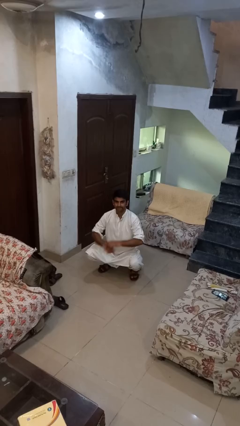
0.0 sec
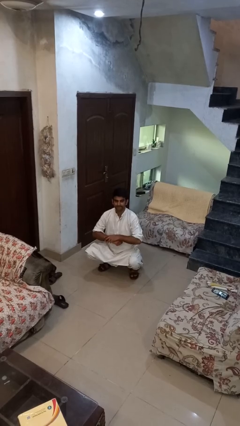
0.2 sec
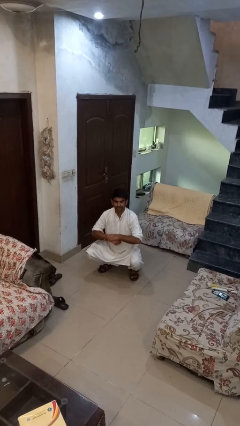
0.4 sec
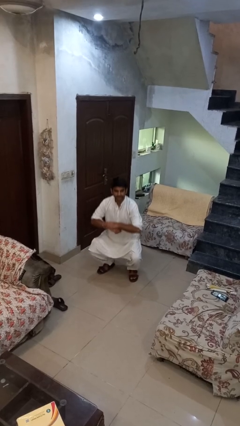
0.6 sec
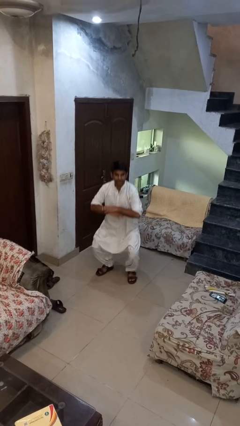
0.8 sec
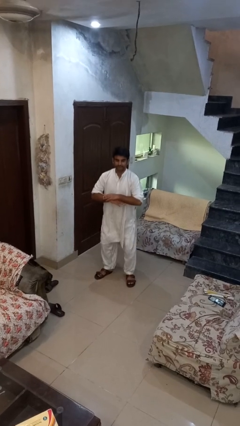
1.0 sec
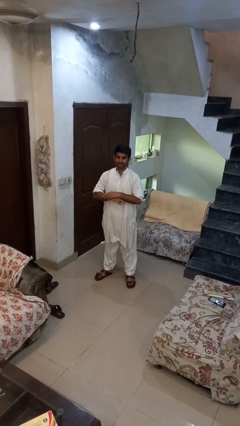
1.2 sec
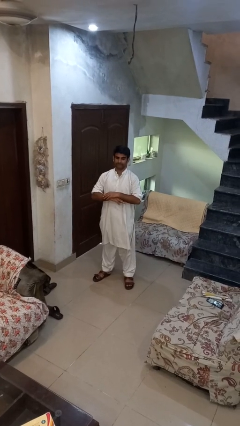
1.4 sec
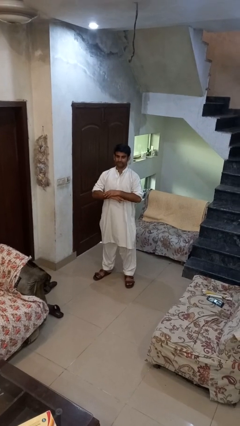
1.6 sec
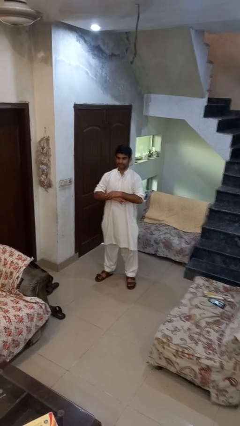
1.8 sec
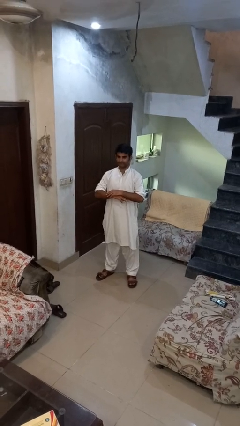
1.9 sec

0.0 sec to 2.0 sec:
person stands up

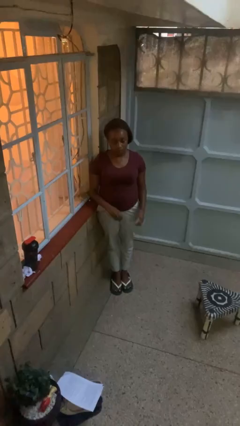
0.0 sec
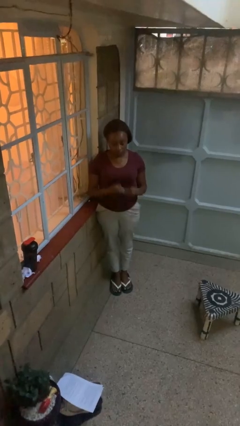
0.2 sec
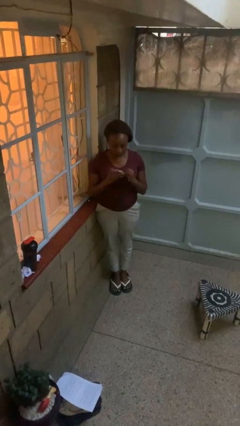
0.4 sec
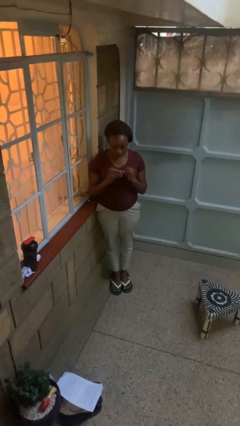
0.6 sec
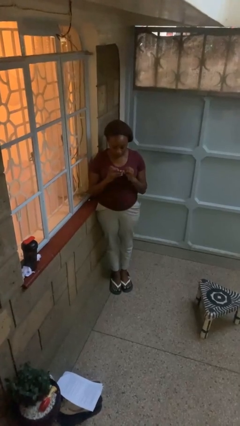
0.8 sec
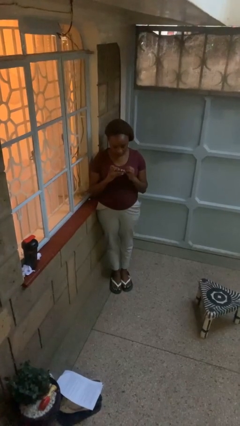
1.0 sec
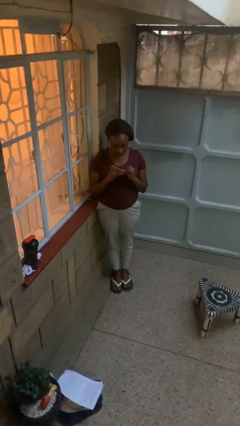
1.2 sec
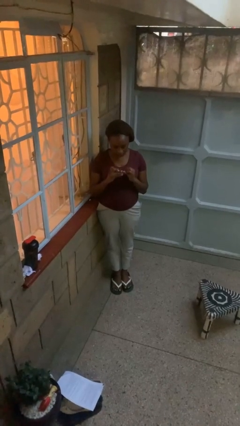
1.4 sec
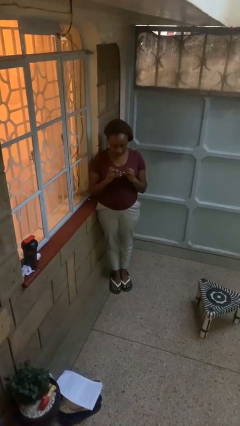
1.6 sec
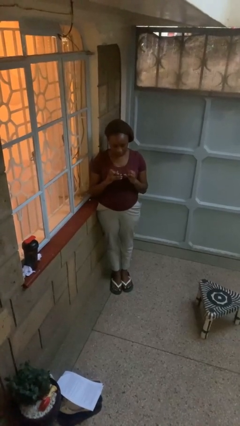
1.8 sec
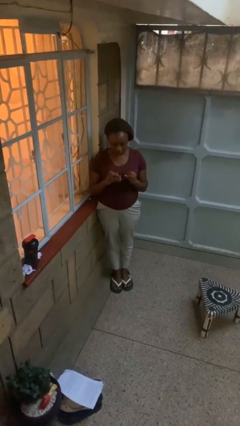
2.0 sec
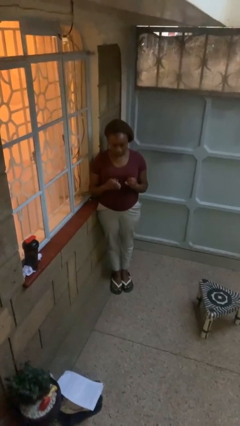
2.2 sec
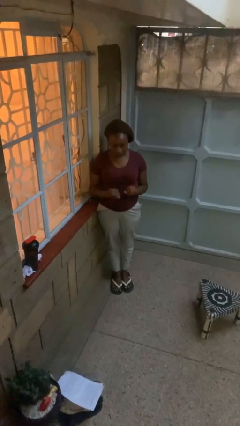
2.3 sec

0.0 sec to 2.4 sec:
person clips fingernails

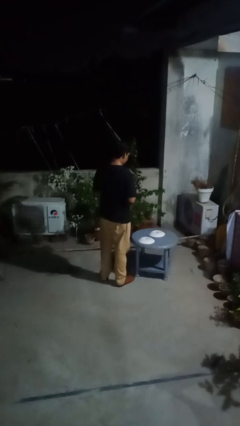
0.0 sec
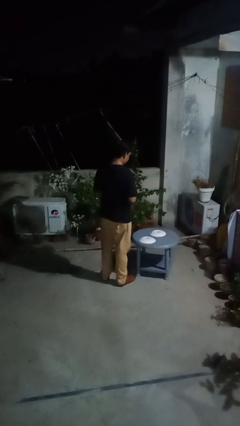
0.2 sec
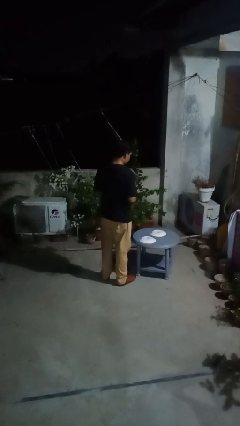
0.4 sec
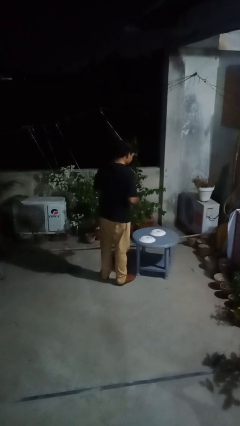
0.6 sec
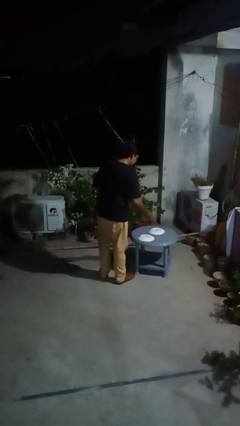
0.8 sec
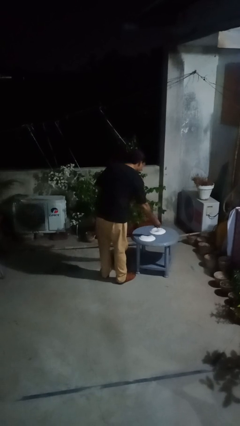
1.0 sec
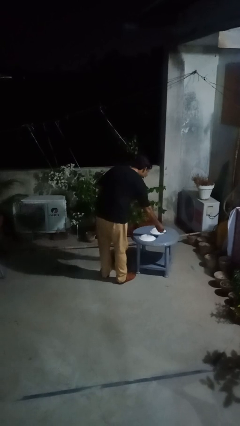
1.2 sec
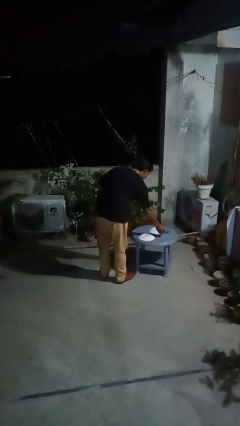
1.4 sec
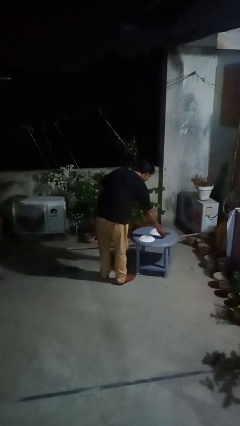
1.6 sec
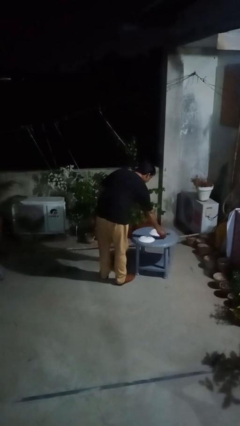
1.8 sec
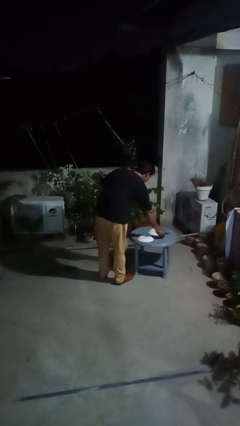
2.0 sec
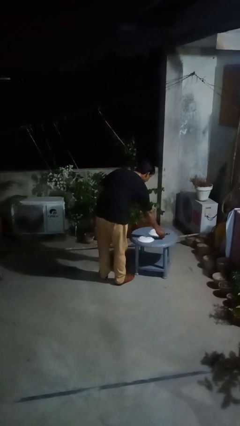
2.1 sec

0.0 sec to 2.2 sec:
person sets table

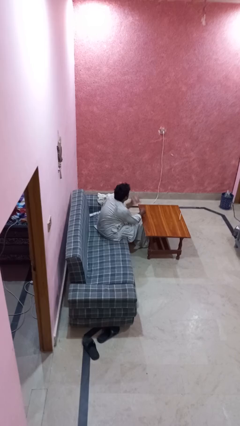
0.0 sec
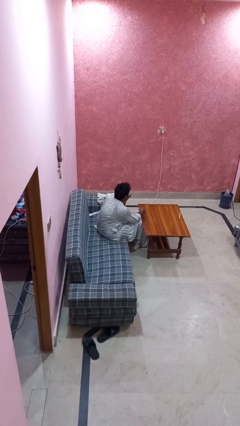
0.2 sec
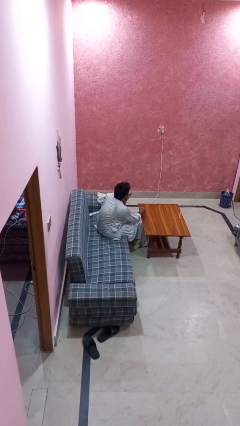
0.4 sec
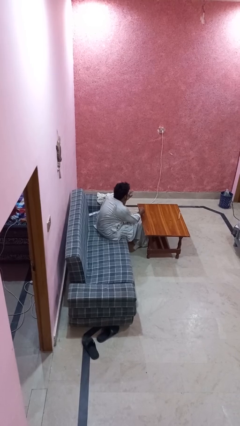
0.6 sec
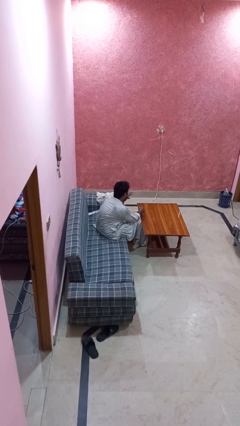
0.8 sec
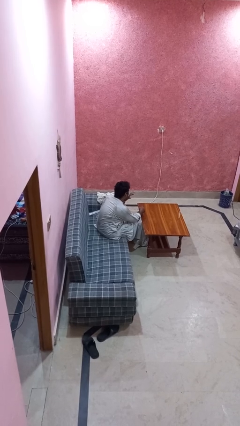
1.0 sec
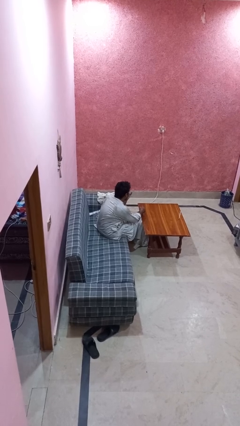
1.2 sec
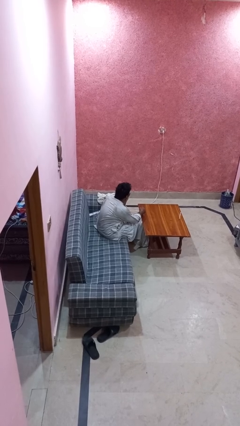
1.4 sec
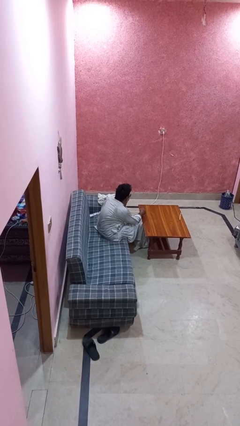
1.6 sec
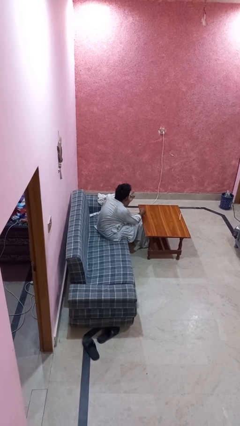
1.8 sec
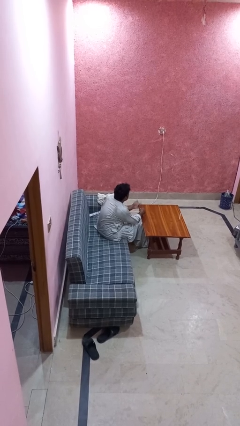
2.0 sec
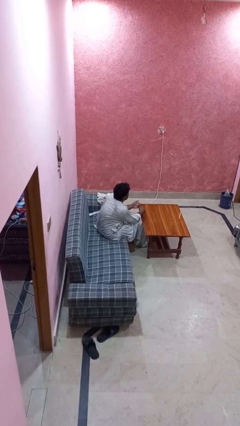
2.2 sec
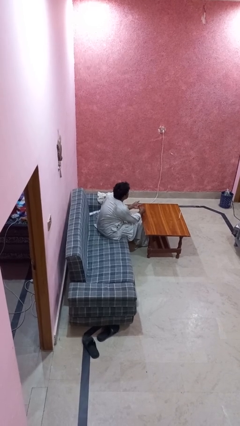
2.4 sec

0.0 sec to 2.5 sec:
person licks fingers

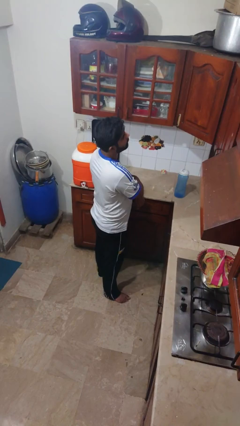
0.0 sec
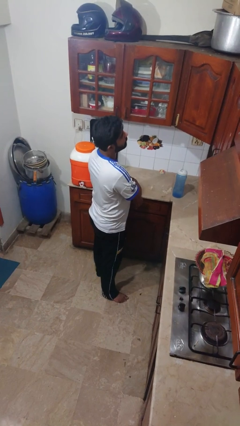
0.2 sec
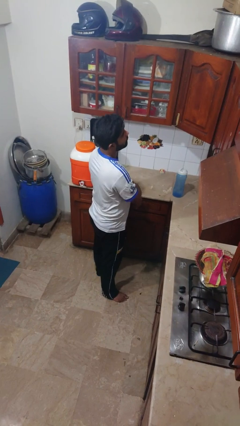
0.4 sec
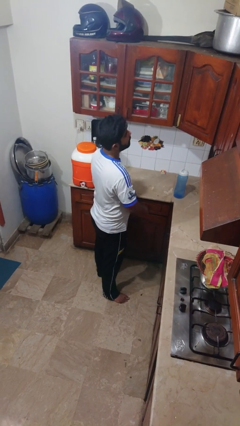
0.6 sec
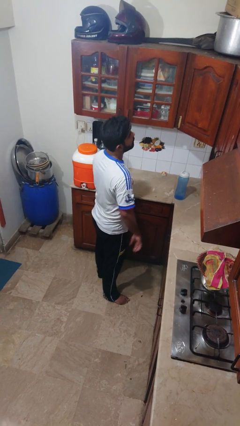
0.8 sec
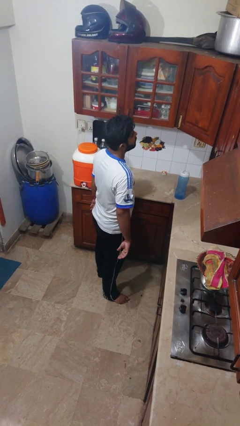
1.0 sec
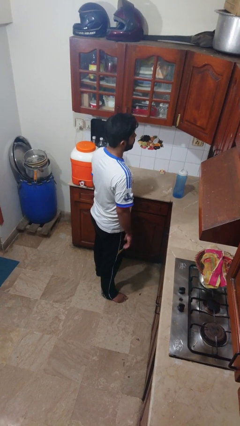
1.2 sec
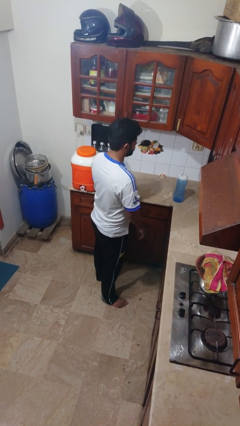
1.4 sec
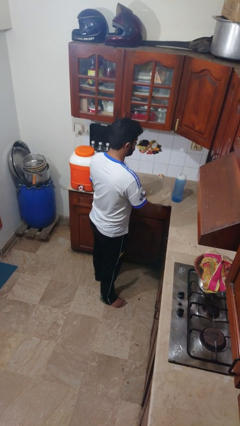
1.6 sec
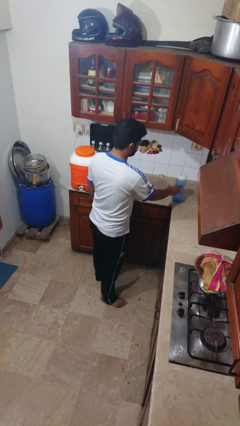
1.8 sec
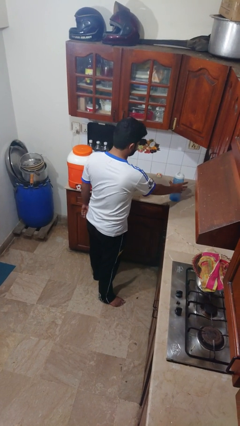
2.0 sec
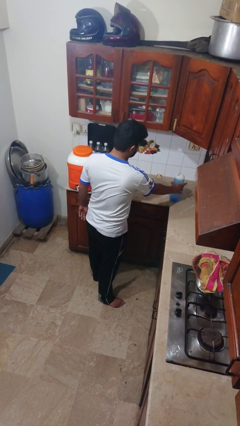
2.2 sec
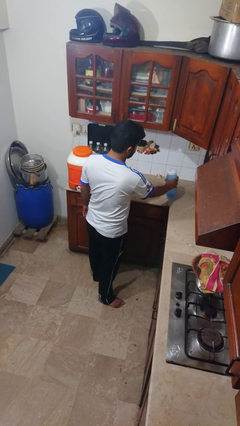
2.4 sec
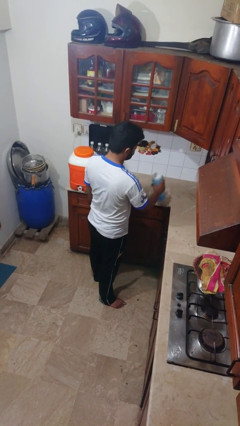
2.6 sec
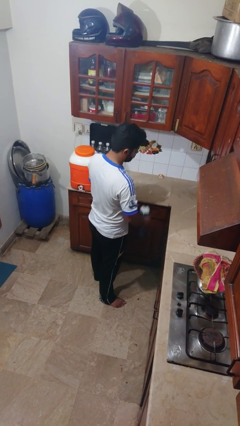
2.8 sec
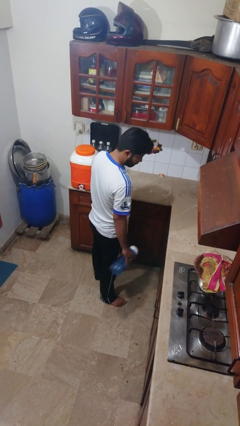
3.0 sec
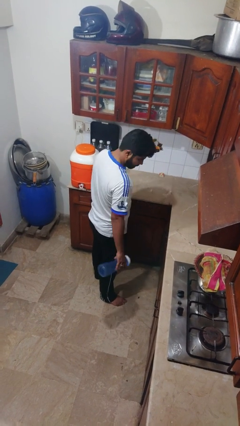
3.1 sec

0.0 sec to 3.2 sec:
person picks up object from countertop

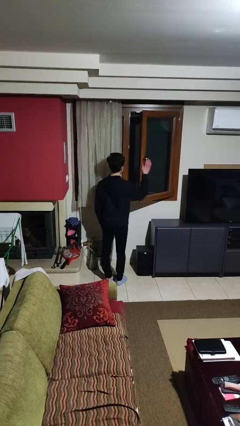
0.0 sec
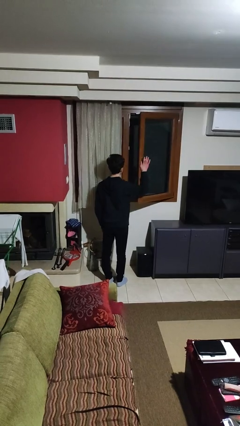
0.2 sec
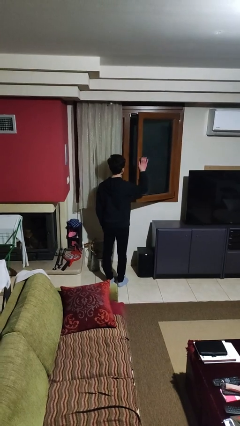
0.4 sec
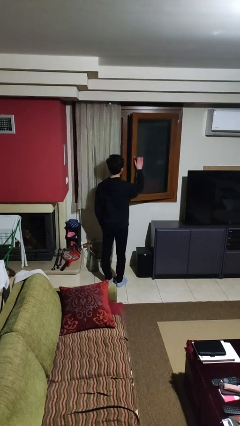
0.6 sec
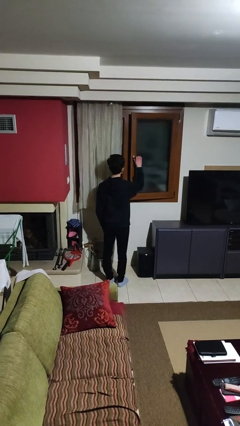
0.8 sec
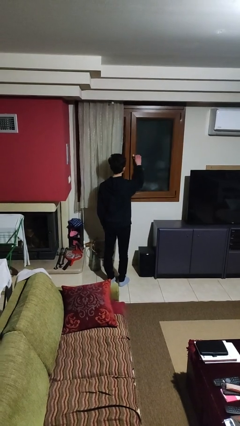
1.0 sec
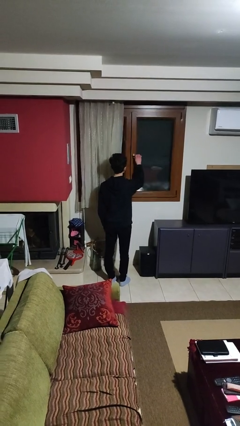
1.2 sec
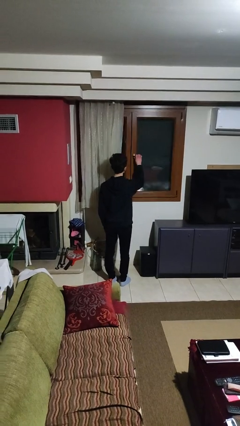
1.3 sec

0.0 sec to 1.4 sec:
person closes home window

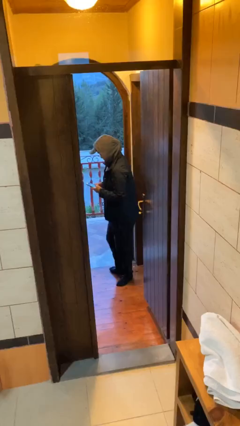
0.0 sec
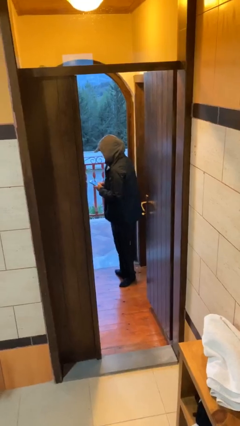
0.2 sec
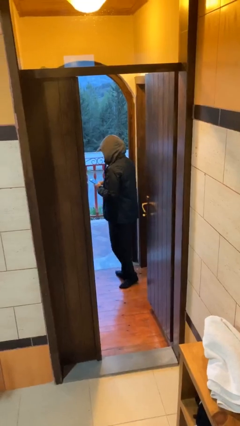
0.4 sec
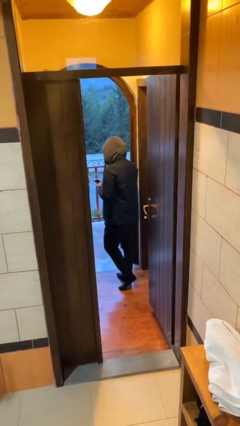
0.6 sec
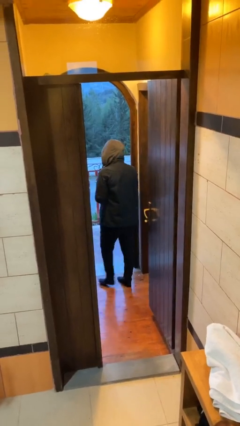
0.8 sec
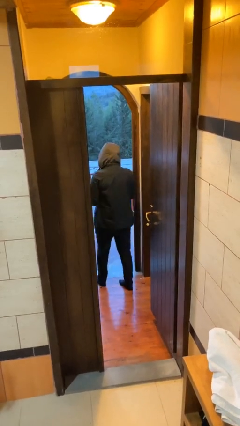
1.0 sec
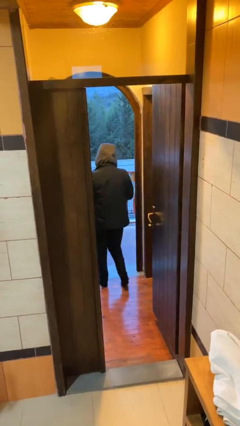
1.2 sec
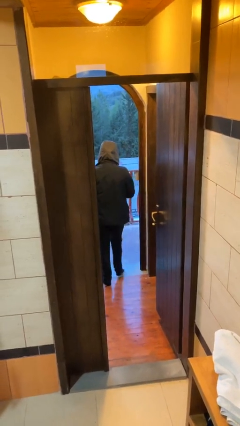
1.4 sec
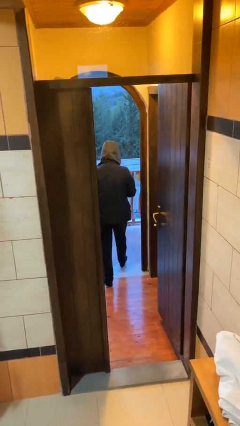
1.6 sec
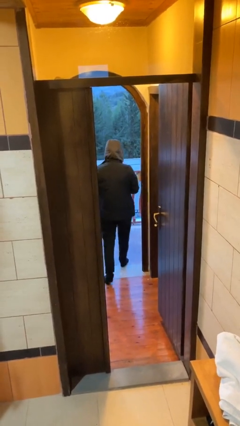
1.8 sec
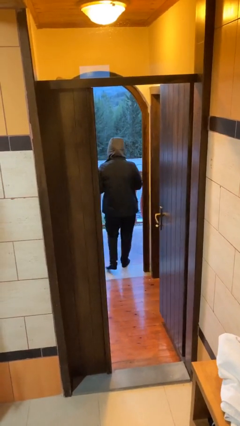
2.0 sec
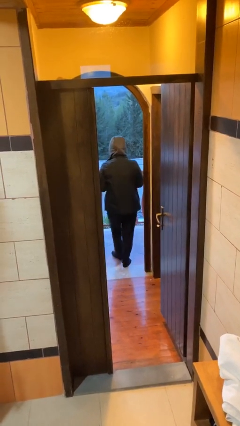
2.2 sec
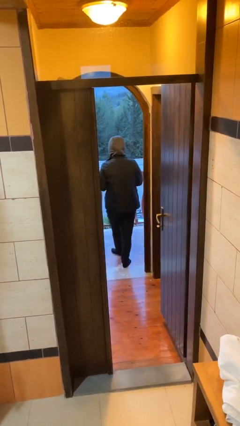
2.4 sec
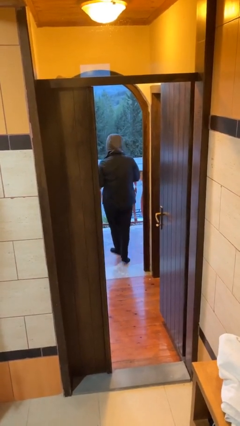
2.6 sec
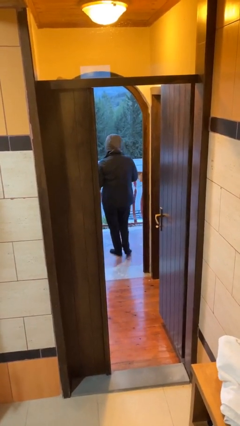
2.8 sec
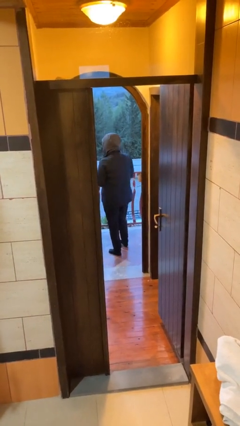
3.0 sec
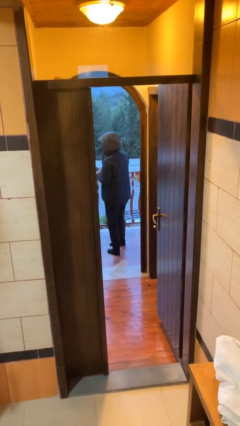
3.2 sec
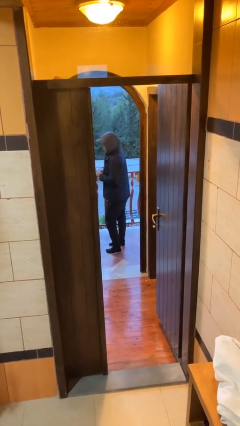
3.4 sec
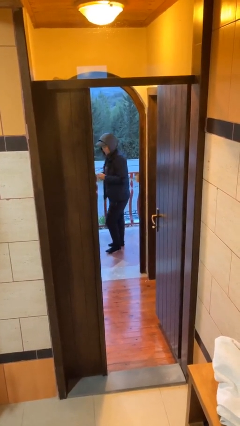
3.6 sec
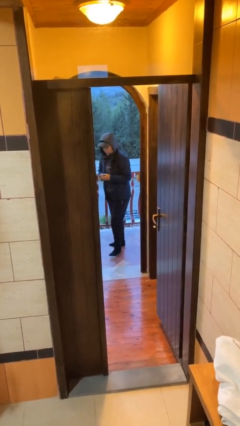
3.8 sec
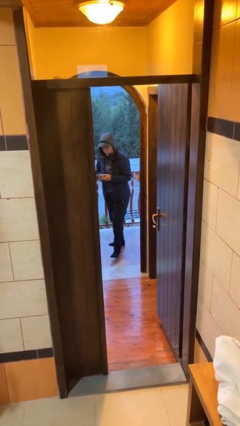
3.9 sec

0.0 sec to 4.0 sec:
person exits scene through structure
